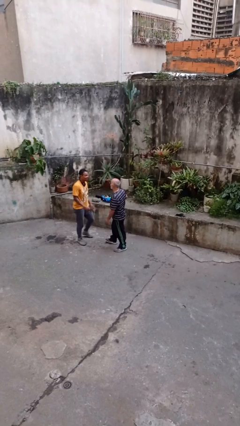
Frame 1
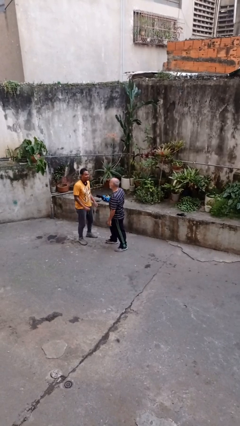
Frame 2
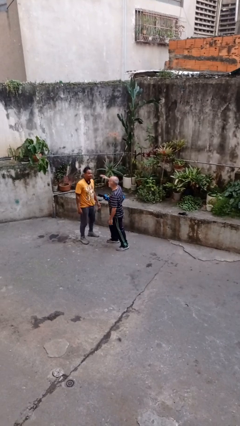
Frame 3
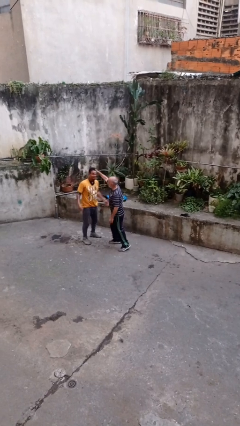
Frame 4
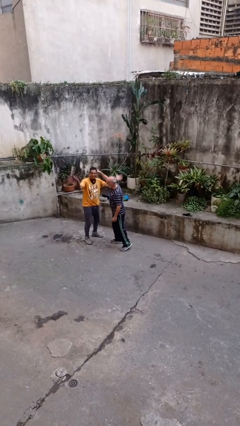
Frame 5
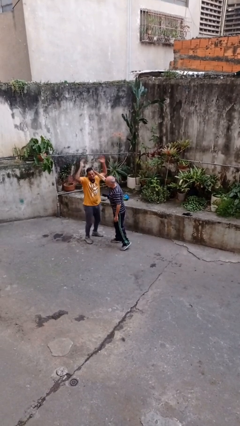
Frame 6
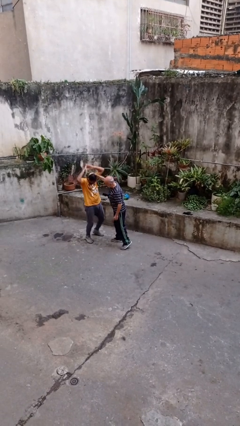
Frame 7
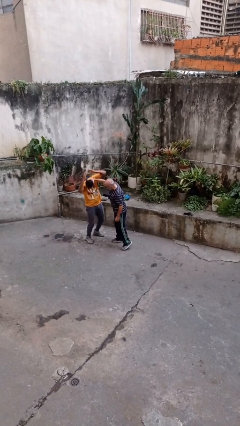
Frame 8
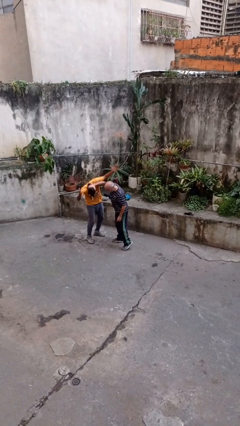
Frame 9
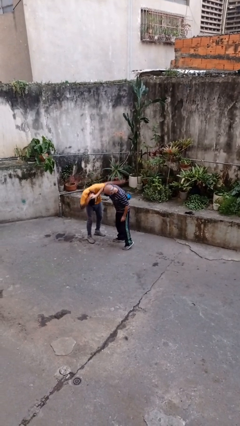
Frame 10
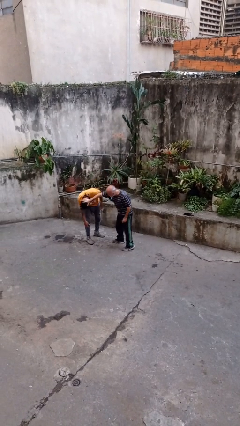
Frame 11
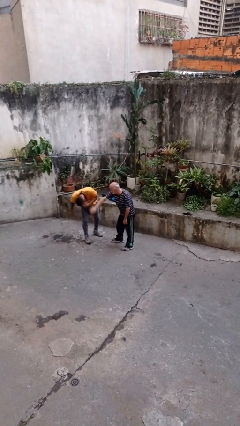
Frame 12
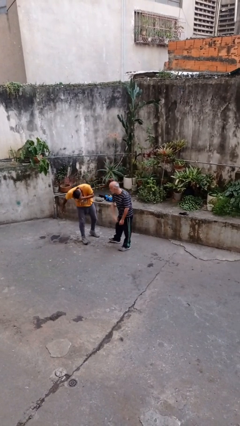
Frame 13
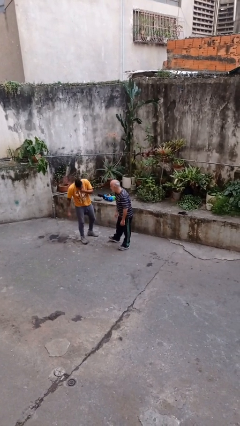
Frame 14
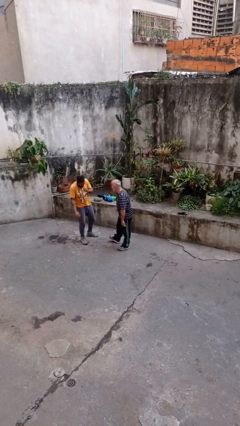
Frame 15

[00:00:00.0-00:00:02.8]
person grabs person by hair

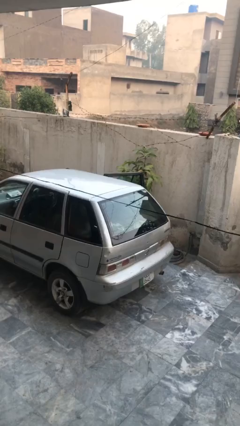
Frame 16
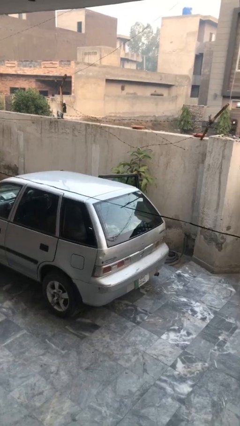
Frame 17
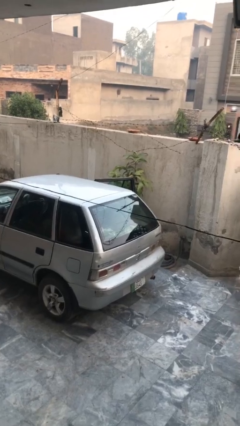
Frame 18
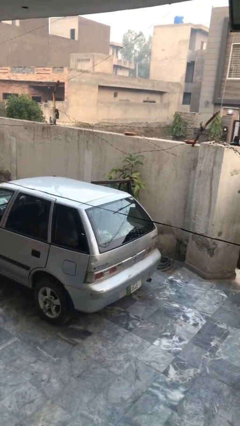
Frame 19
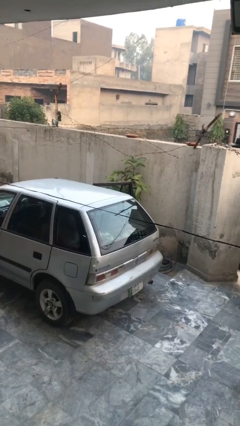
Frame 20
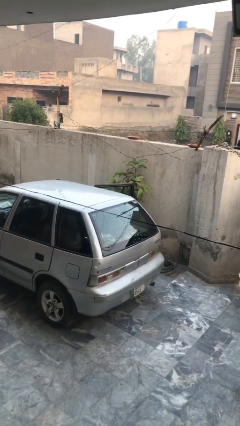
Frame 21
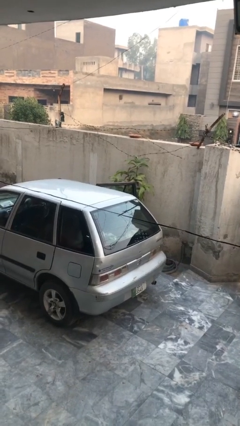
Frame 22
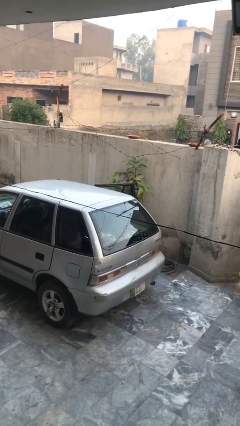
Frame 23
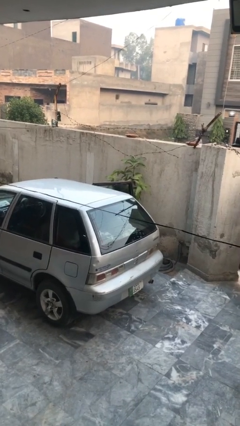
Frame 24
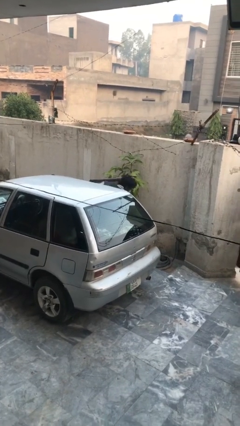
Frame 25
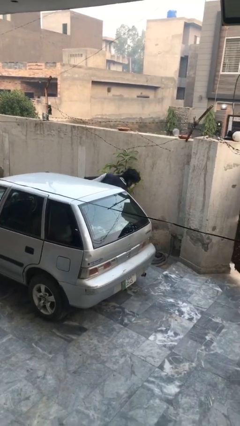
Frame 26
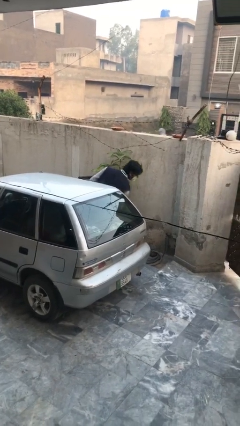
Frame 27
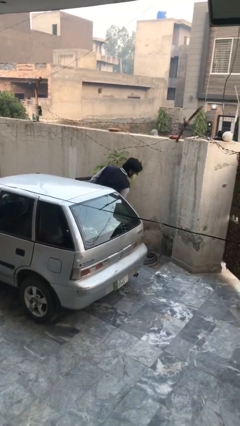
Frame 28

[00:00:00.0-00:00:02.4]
person exits car

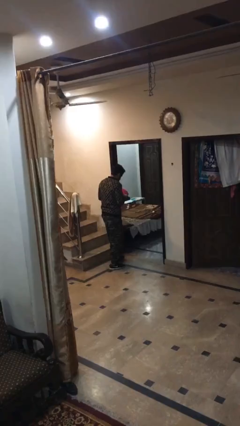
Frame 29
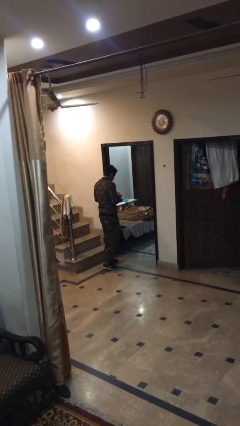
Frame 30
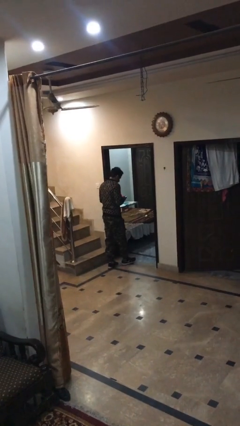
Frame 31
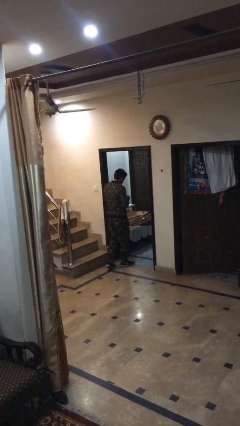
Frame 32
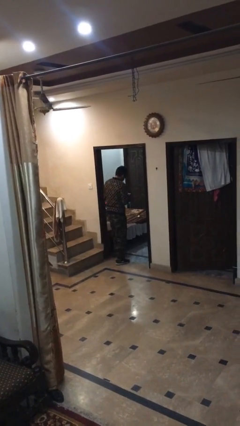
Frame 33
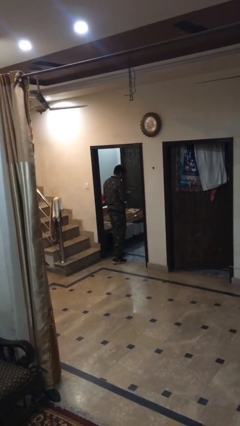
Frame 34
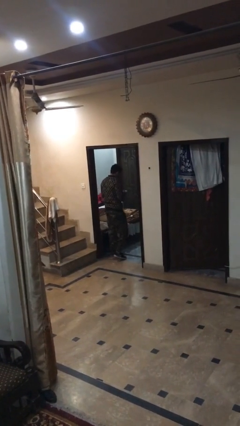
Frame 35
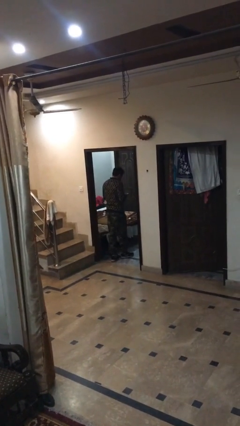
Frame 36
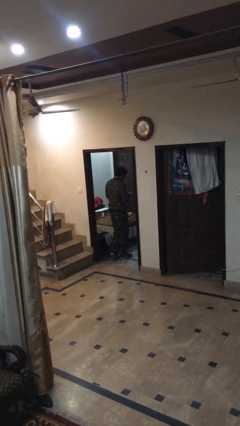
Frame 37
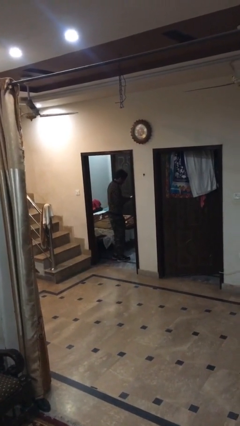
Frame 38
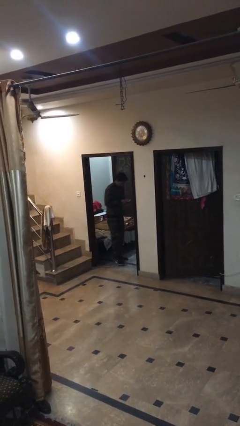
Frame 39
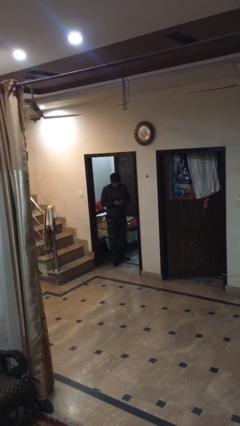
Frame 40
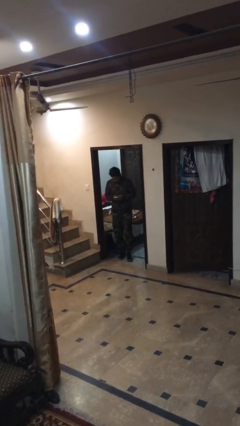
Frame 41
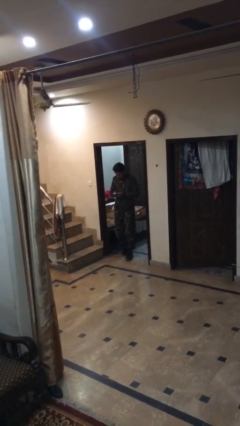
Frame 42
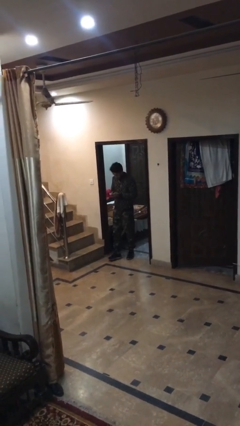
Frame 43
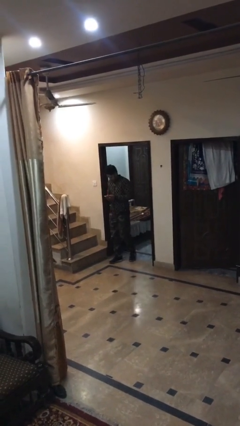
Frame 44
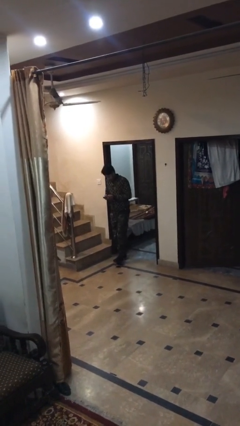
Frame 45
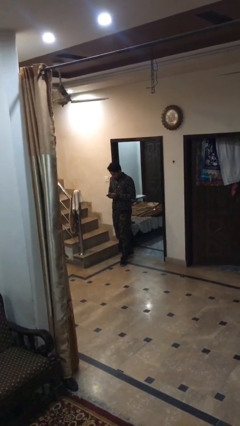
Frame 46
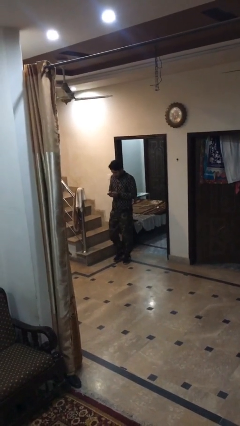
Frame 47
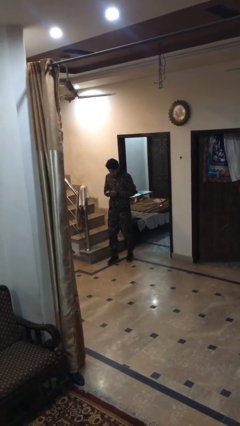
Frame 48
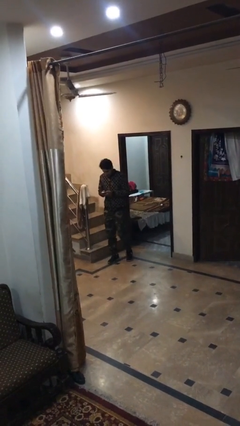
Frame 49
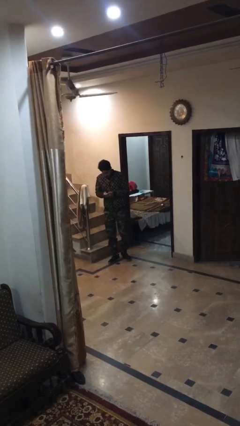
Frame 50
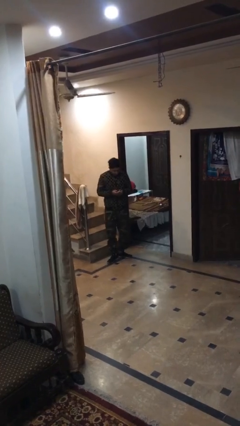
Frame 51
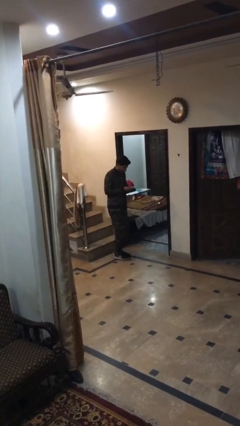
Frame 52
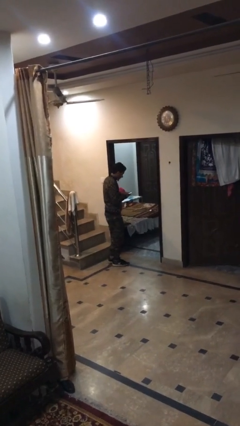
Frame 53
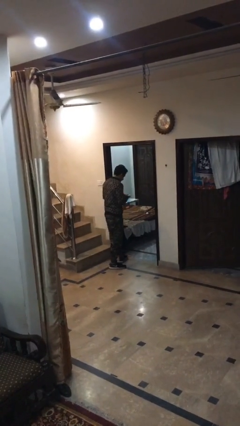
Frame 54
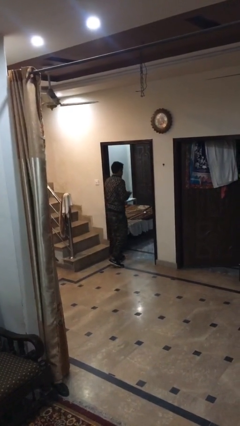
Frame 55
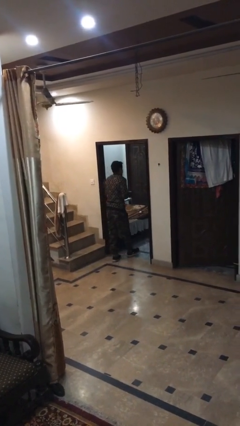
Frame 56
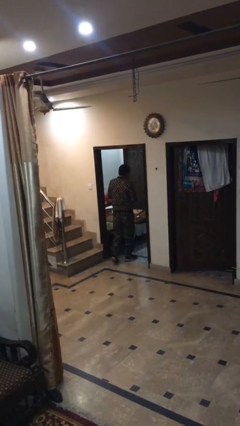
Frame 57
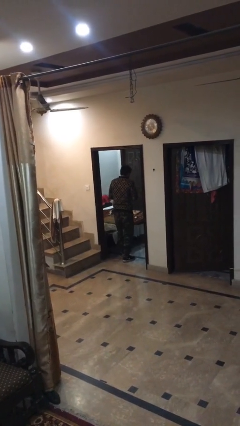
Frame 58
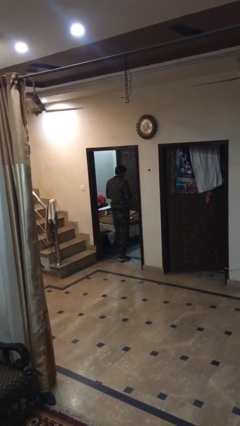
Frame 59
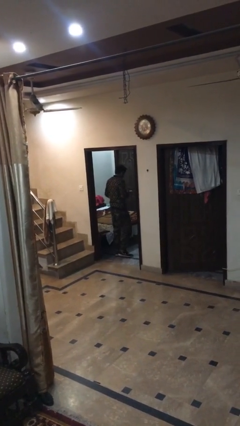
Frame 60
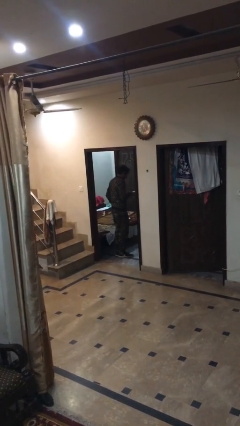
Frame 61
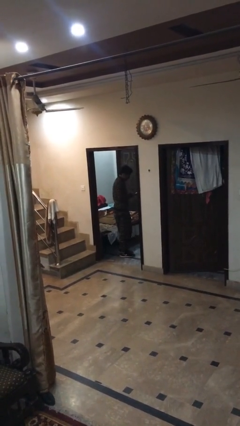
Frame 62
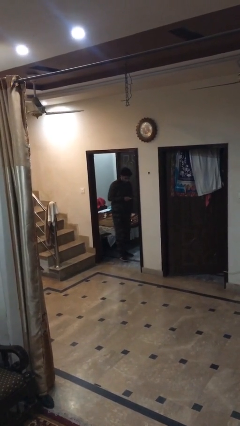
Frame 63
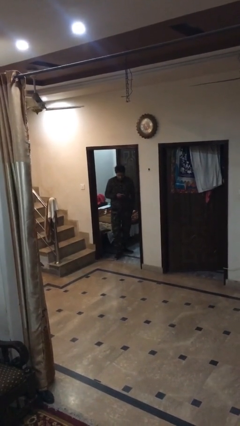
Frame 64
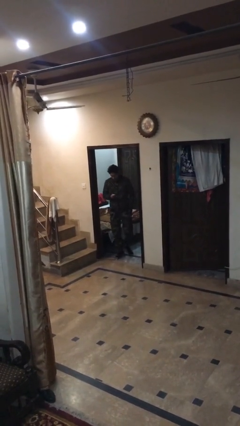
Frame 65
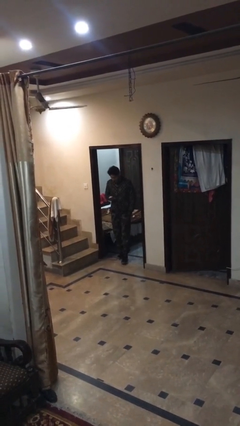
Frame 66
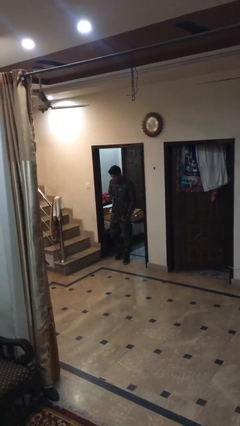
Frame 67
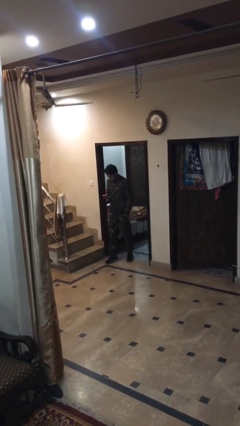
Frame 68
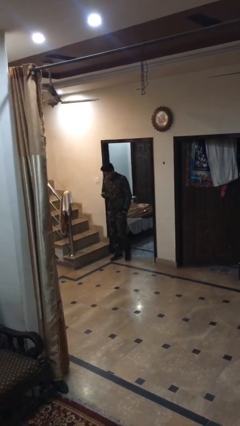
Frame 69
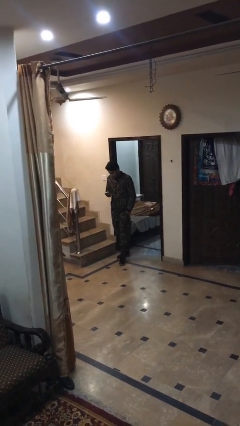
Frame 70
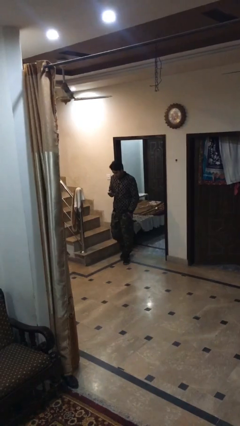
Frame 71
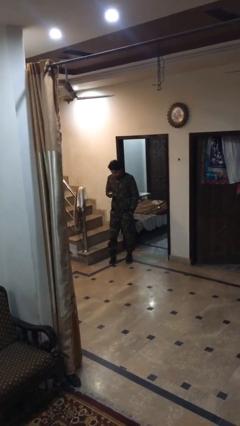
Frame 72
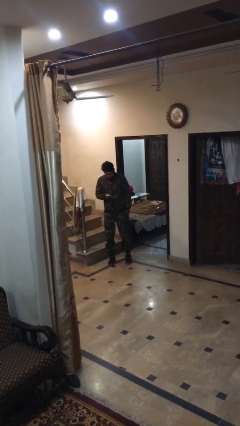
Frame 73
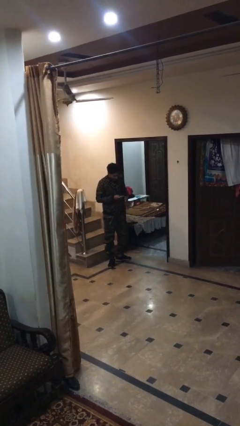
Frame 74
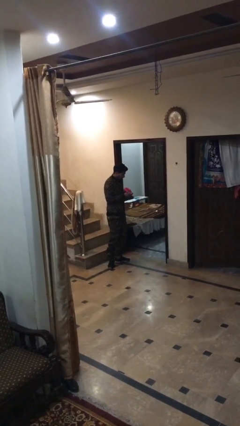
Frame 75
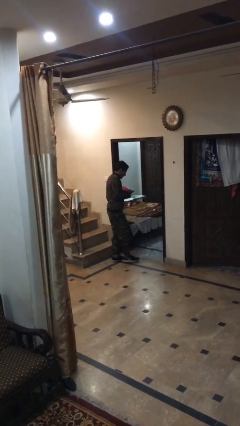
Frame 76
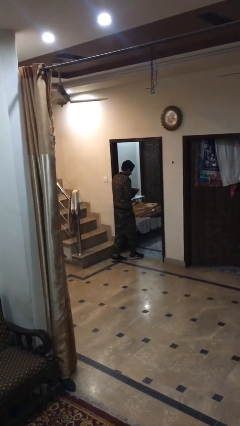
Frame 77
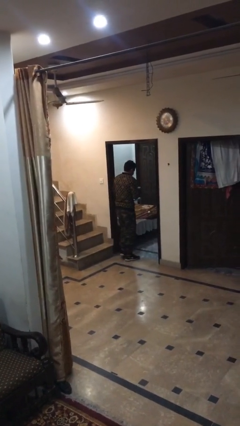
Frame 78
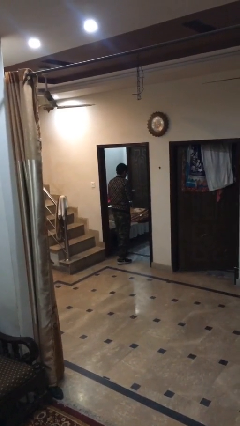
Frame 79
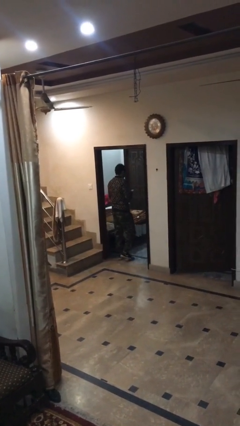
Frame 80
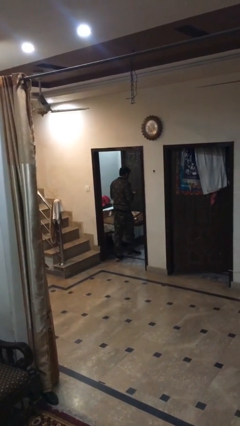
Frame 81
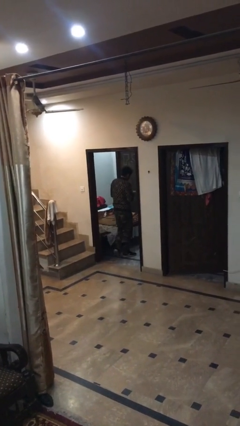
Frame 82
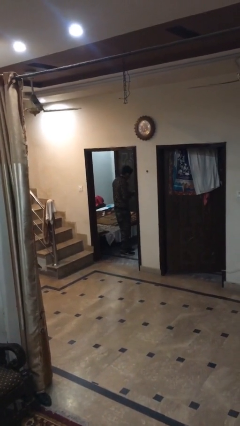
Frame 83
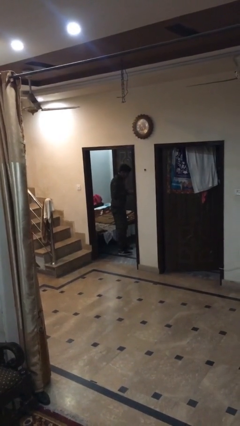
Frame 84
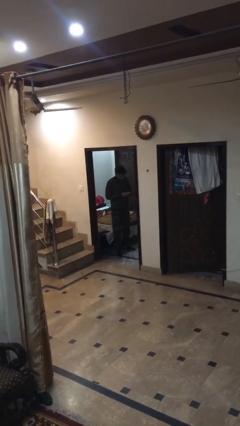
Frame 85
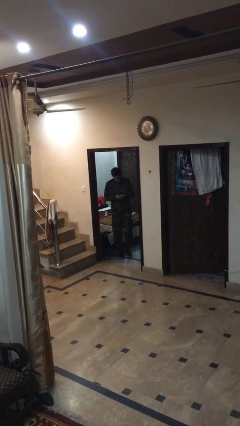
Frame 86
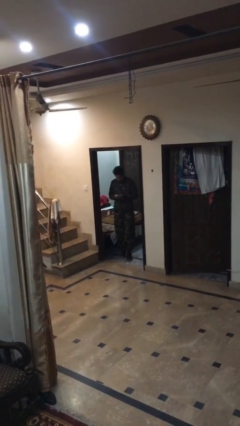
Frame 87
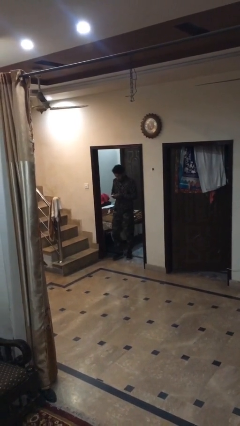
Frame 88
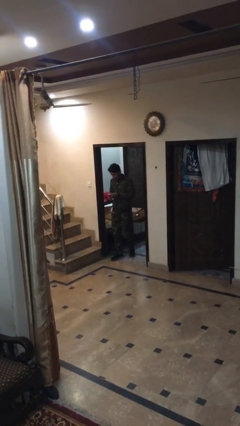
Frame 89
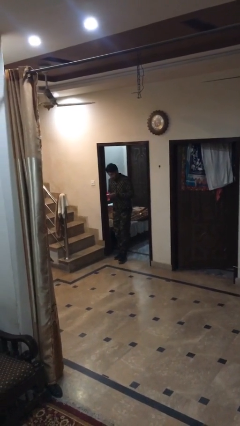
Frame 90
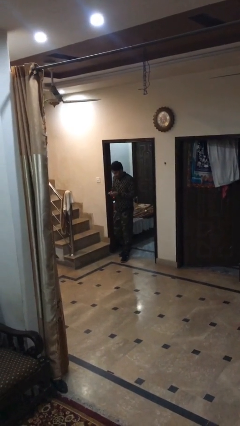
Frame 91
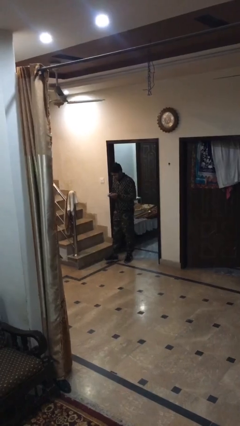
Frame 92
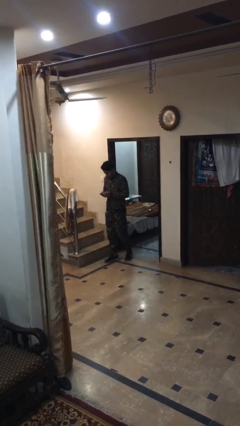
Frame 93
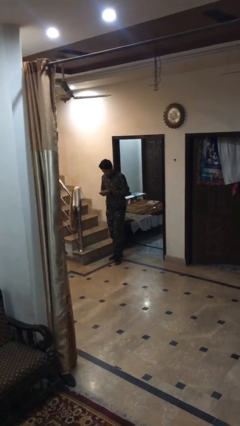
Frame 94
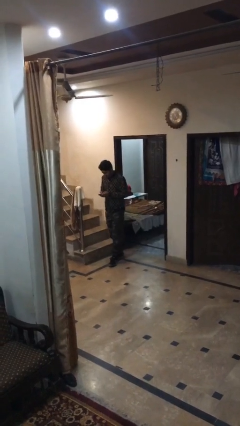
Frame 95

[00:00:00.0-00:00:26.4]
person texts on phone
